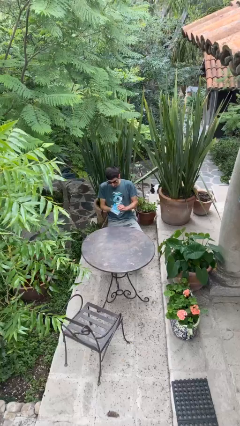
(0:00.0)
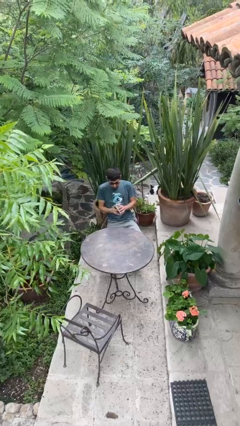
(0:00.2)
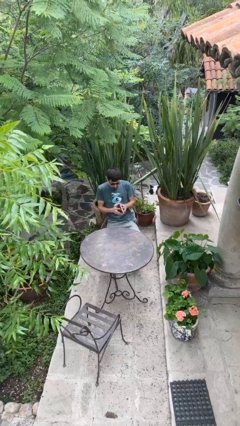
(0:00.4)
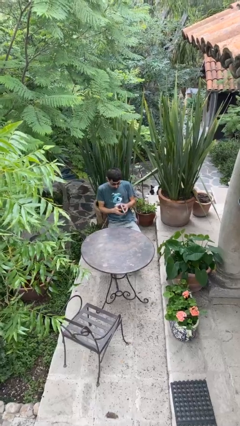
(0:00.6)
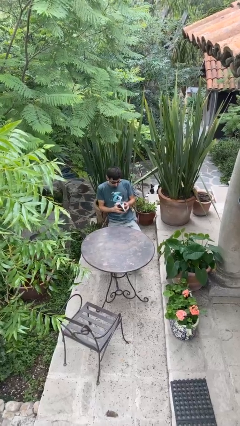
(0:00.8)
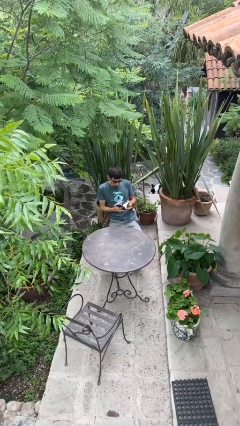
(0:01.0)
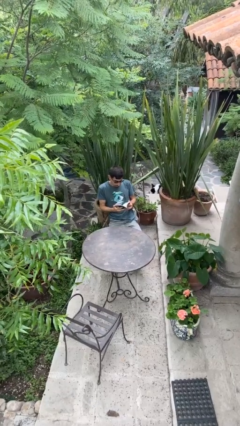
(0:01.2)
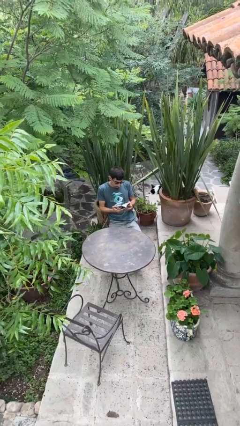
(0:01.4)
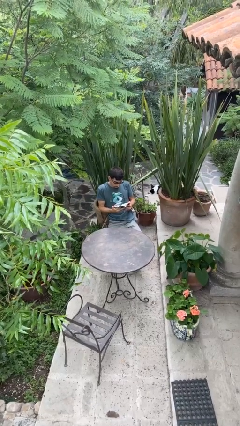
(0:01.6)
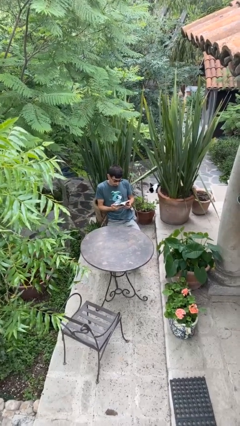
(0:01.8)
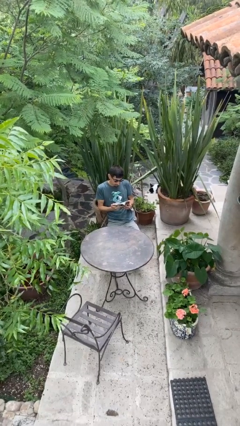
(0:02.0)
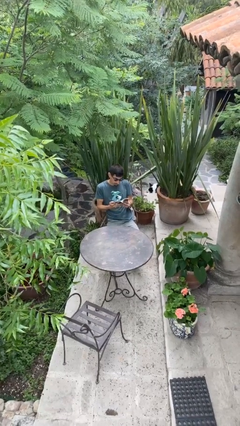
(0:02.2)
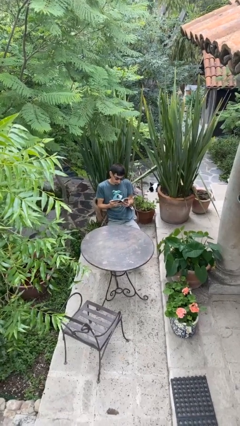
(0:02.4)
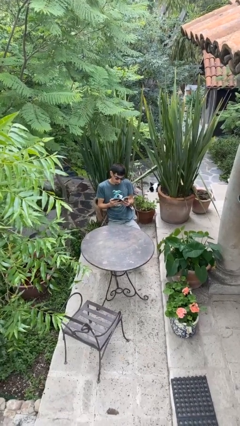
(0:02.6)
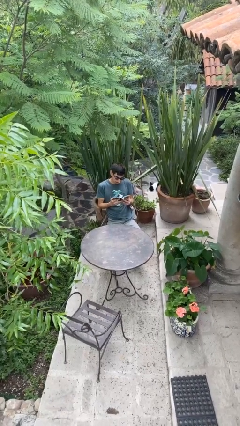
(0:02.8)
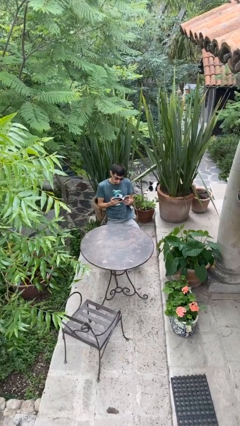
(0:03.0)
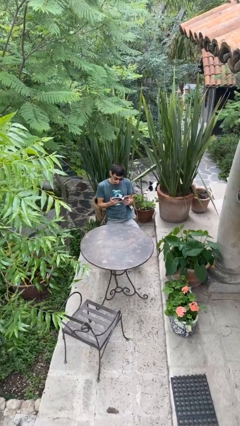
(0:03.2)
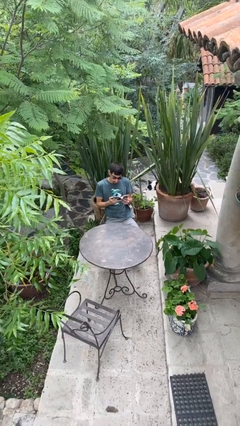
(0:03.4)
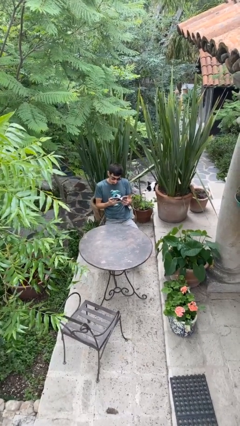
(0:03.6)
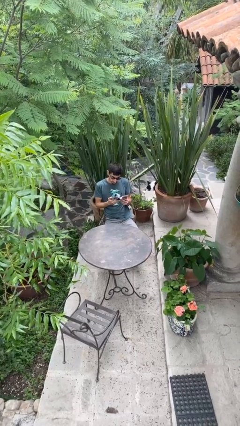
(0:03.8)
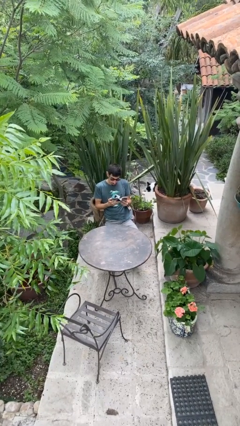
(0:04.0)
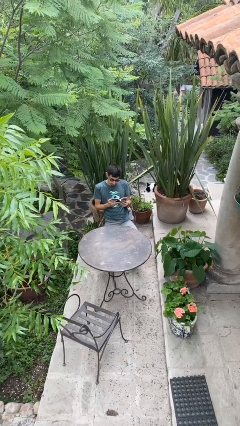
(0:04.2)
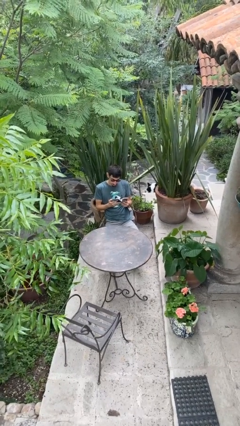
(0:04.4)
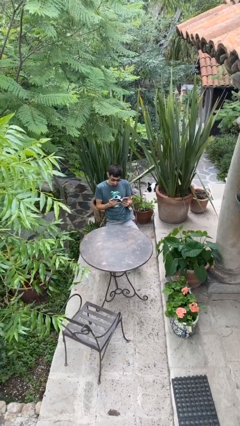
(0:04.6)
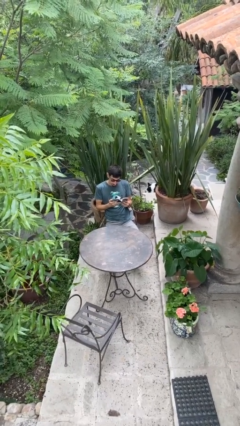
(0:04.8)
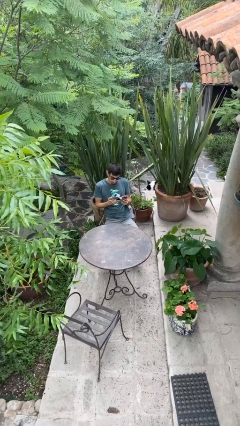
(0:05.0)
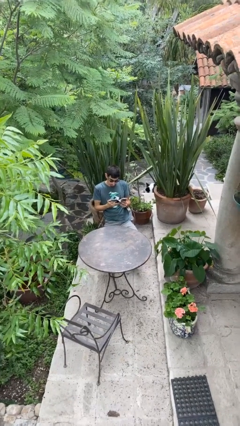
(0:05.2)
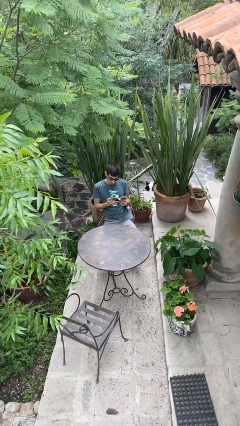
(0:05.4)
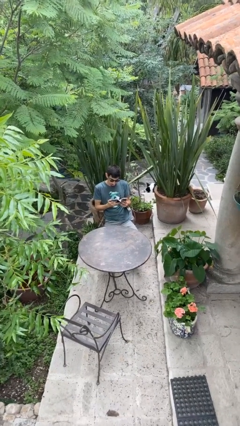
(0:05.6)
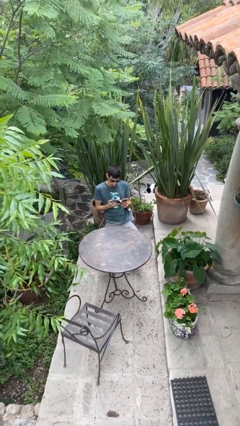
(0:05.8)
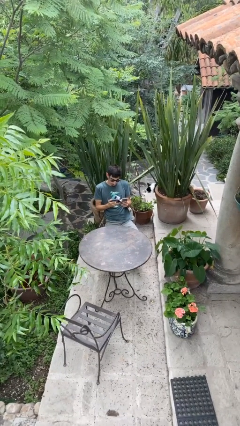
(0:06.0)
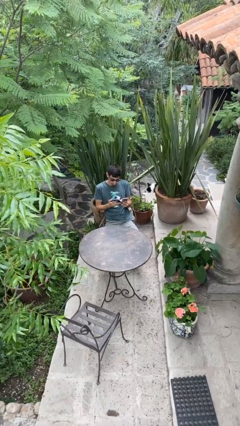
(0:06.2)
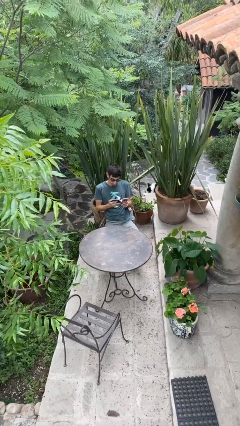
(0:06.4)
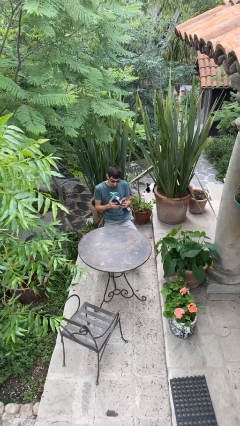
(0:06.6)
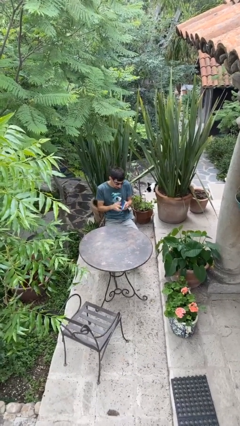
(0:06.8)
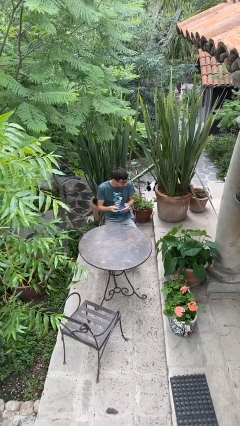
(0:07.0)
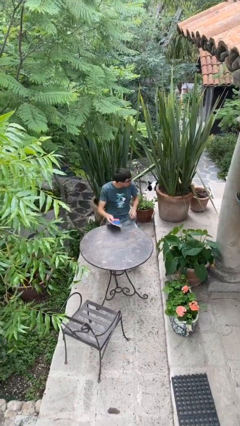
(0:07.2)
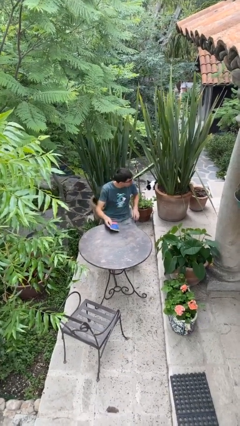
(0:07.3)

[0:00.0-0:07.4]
person reads document

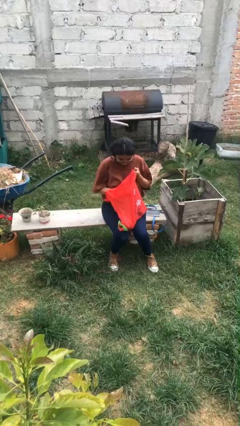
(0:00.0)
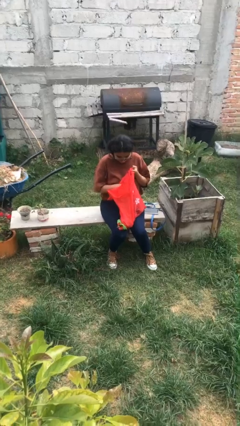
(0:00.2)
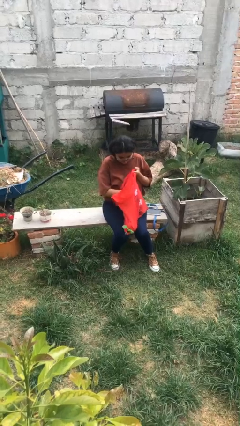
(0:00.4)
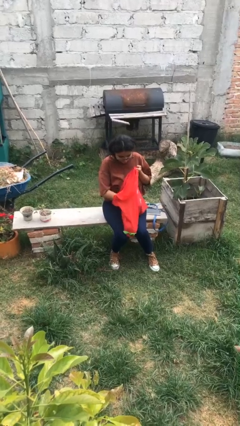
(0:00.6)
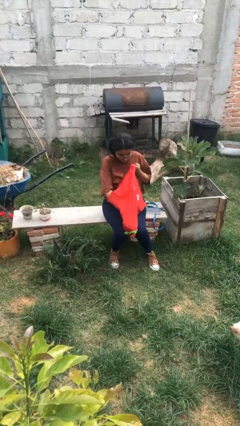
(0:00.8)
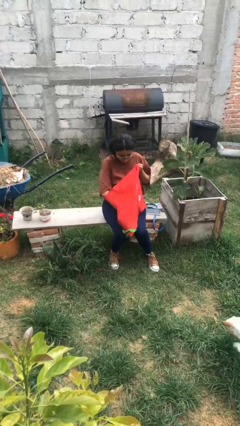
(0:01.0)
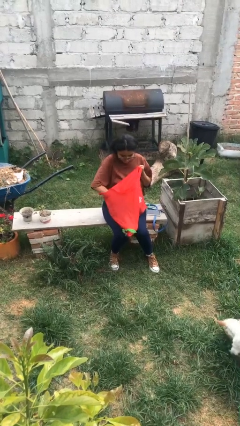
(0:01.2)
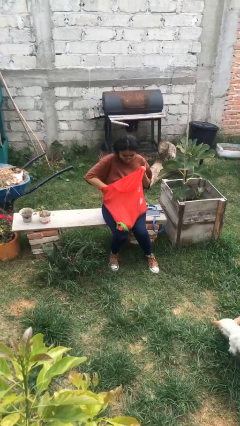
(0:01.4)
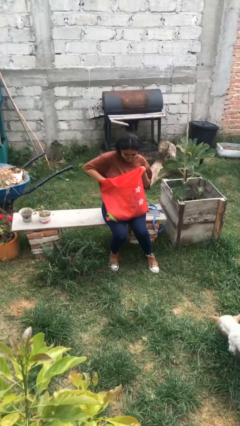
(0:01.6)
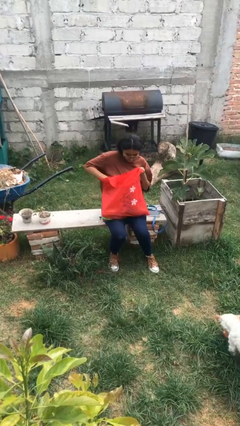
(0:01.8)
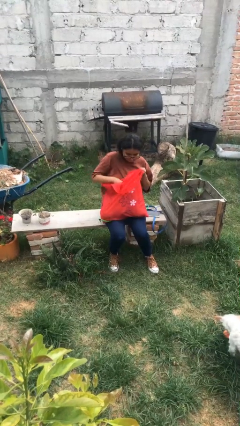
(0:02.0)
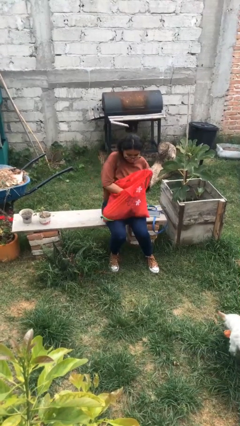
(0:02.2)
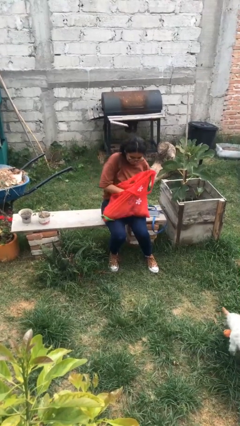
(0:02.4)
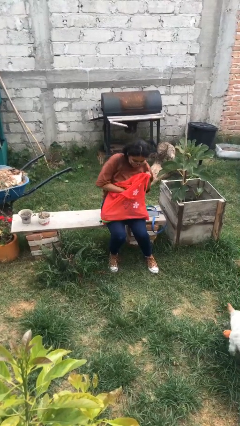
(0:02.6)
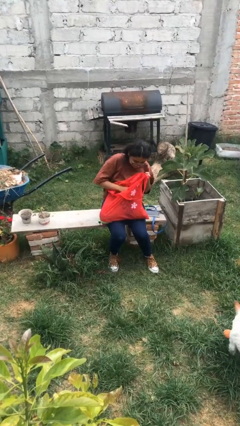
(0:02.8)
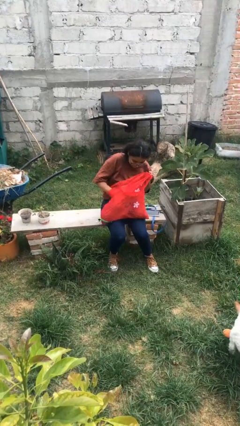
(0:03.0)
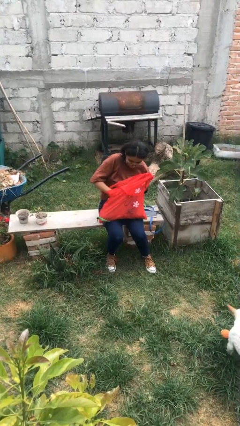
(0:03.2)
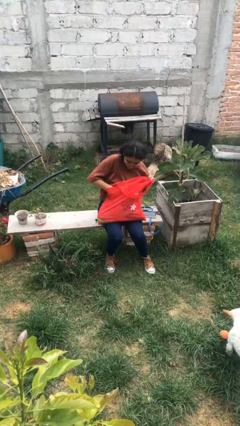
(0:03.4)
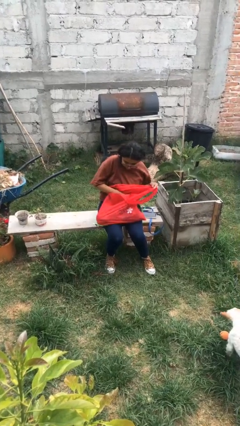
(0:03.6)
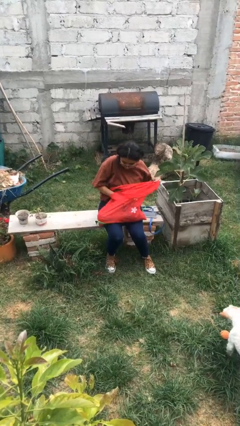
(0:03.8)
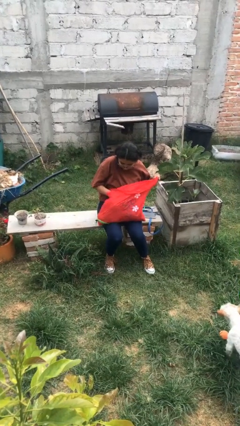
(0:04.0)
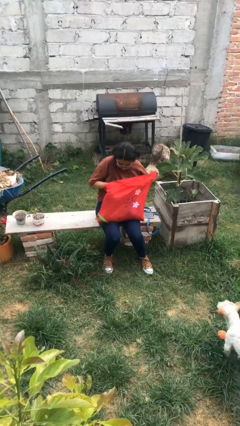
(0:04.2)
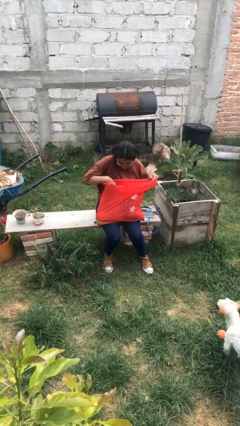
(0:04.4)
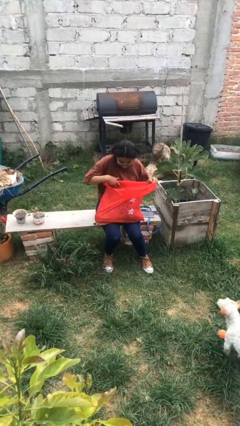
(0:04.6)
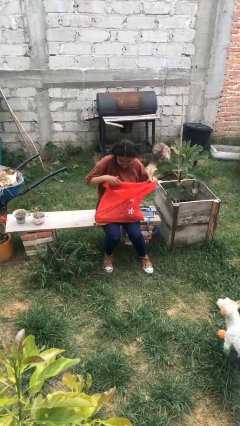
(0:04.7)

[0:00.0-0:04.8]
person searches in bag

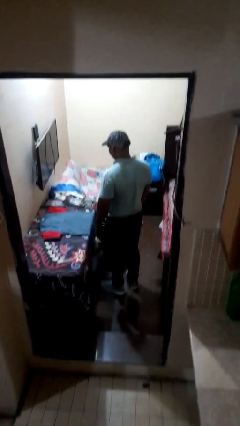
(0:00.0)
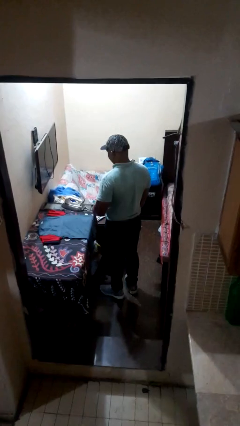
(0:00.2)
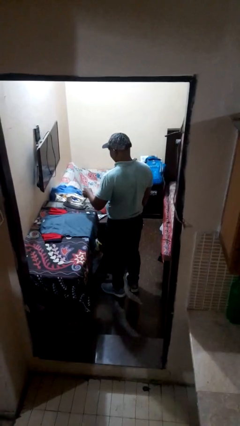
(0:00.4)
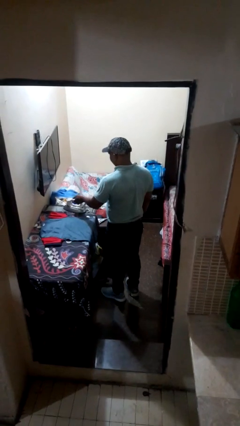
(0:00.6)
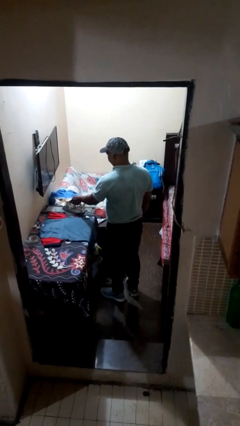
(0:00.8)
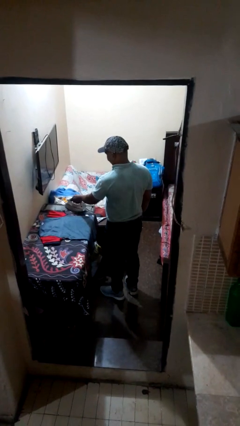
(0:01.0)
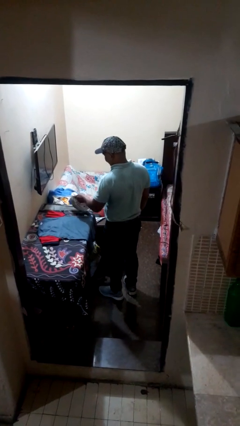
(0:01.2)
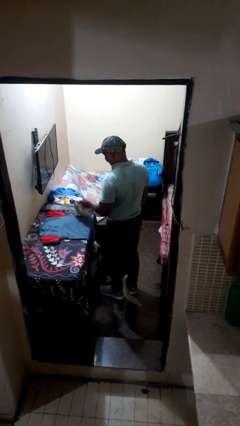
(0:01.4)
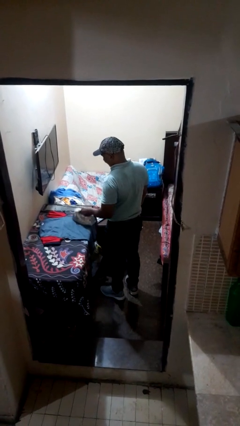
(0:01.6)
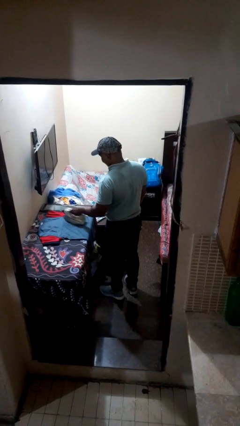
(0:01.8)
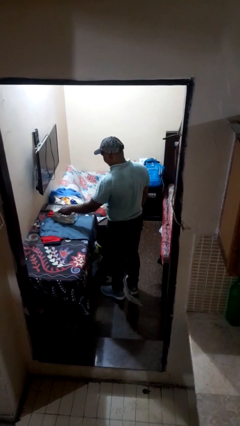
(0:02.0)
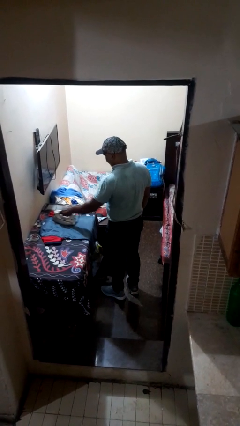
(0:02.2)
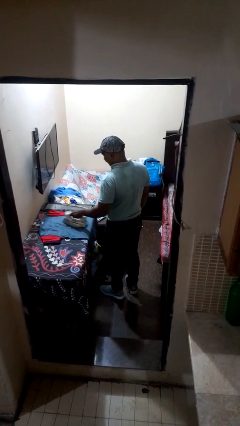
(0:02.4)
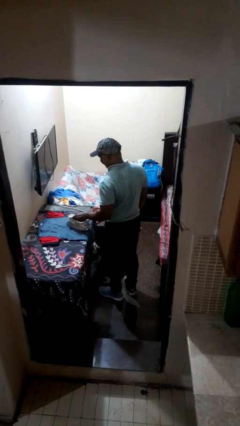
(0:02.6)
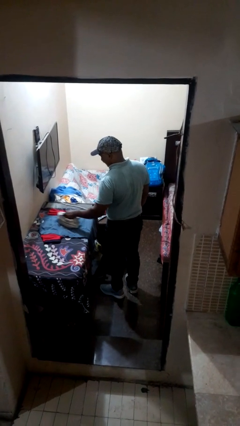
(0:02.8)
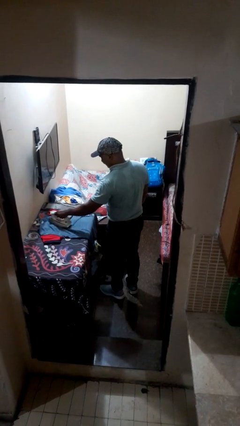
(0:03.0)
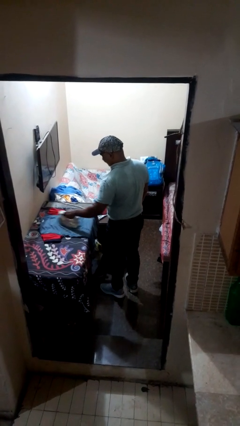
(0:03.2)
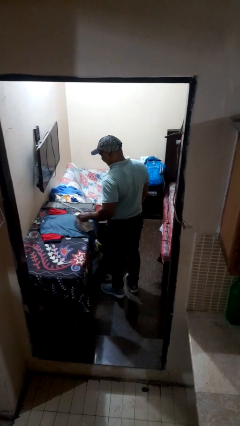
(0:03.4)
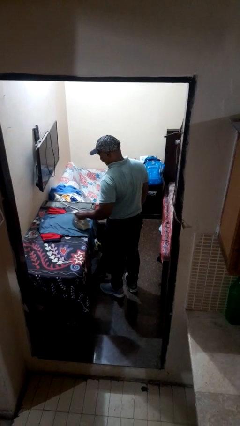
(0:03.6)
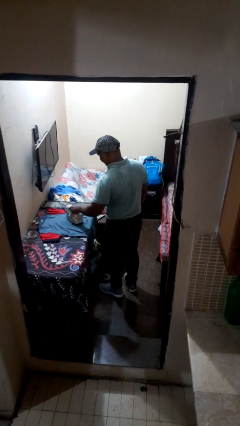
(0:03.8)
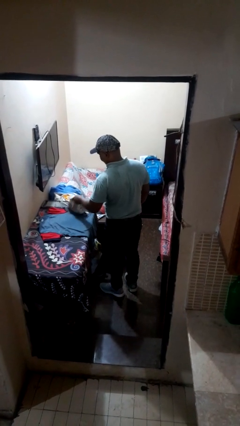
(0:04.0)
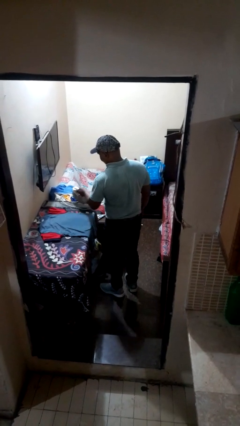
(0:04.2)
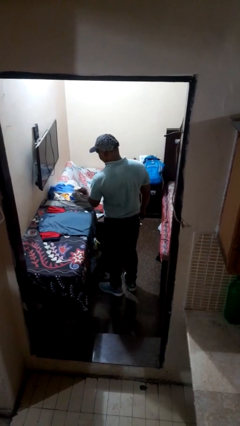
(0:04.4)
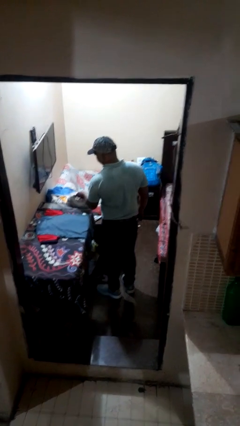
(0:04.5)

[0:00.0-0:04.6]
person irons clothes

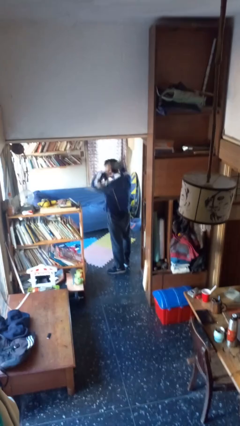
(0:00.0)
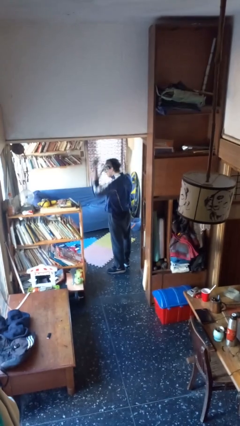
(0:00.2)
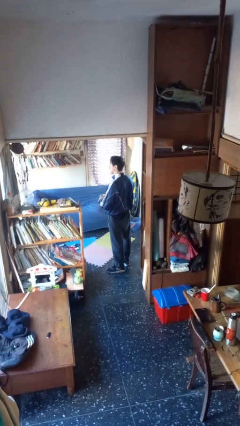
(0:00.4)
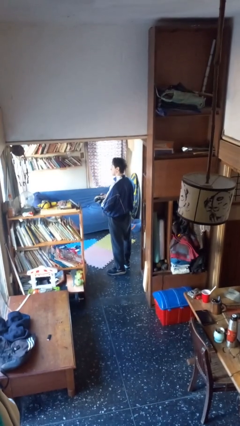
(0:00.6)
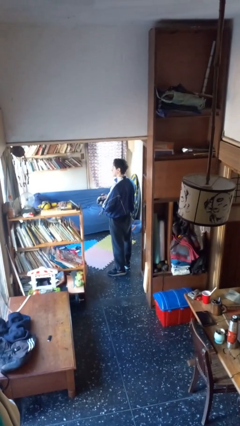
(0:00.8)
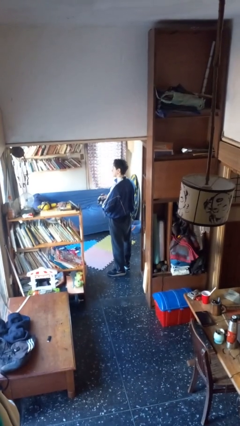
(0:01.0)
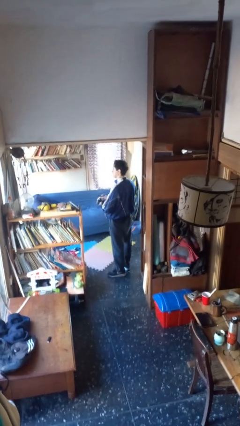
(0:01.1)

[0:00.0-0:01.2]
person takes off scarf
